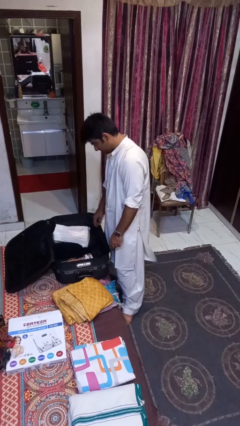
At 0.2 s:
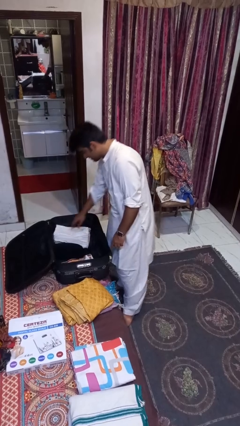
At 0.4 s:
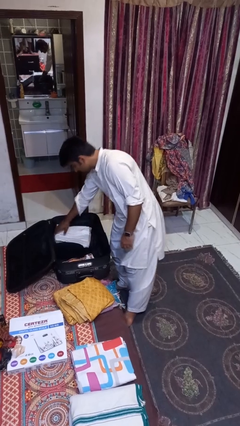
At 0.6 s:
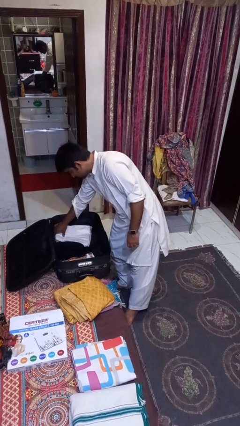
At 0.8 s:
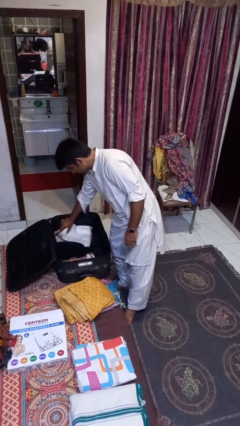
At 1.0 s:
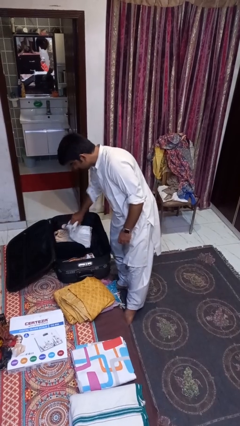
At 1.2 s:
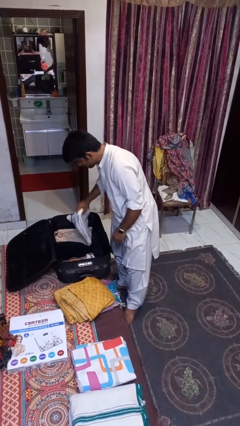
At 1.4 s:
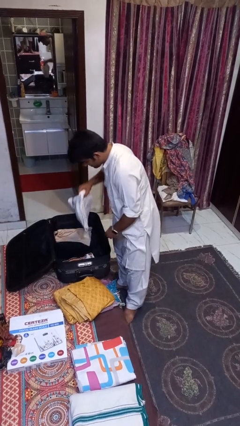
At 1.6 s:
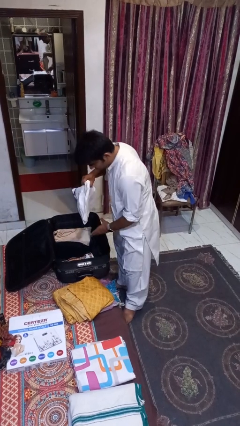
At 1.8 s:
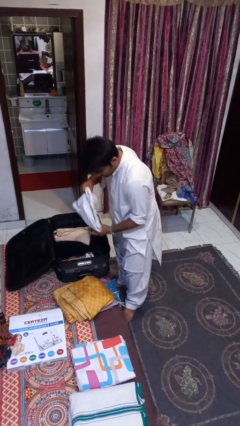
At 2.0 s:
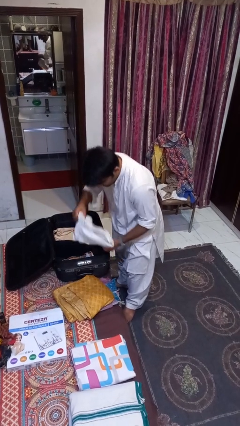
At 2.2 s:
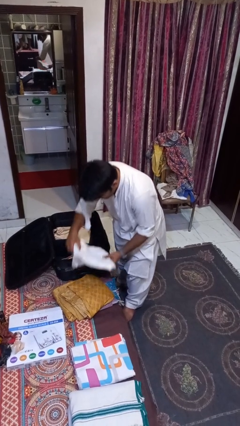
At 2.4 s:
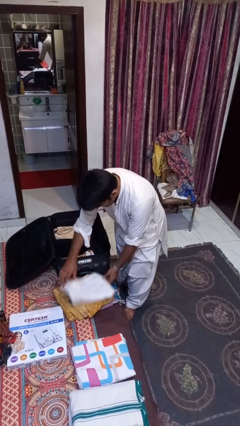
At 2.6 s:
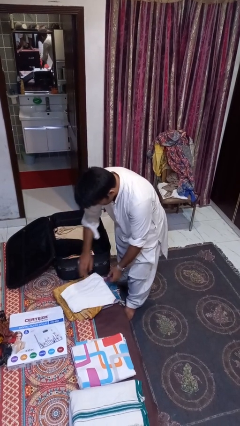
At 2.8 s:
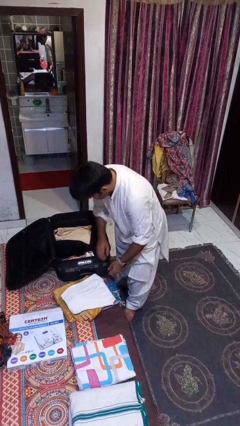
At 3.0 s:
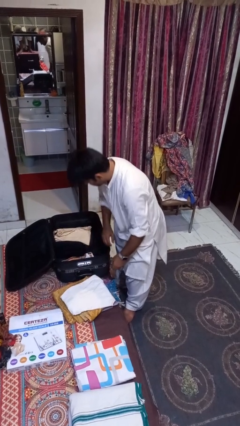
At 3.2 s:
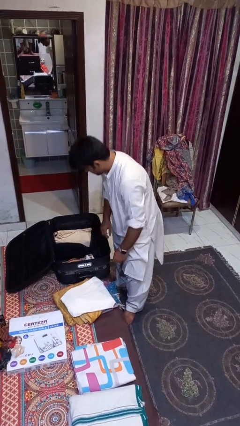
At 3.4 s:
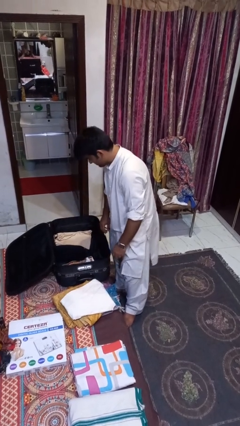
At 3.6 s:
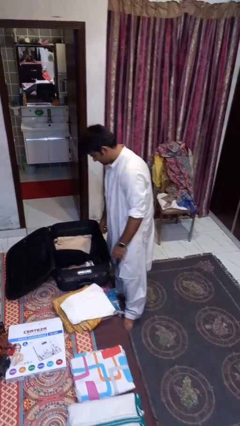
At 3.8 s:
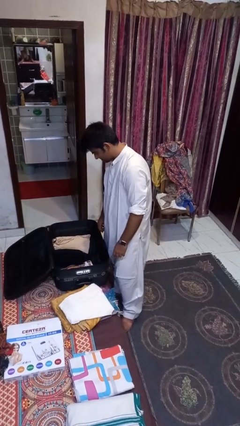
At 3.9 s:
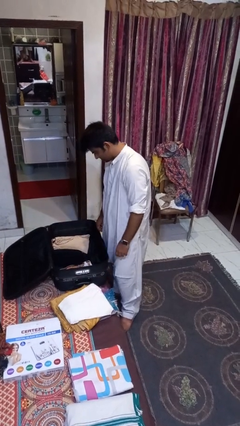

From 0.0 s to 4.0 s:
person unloads clothes from suitcase

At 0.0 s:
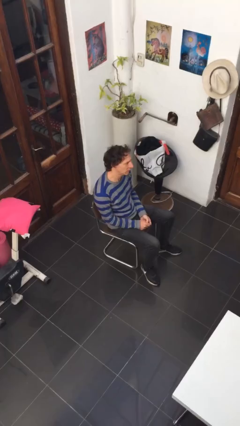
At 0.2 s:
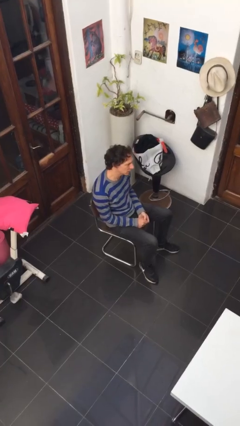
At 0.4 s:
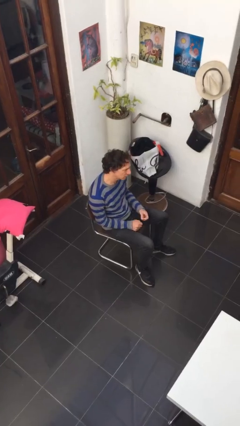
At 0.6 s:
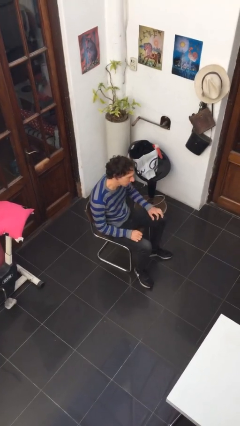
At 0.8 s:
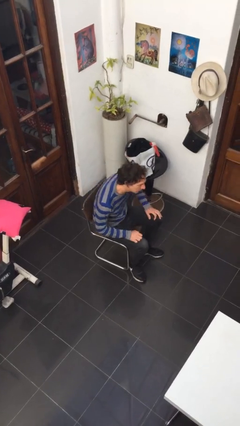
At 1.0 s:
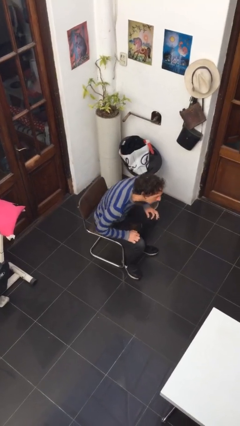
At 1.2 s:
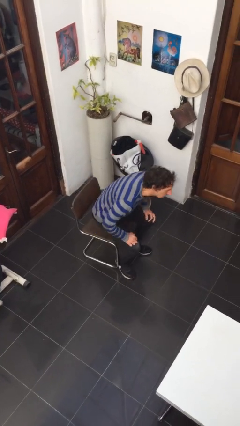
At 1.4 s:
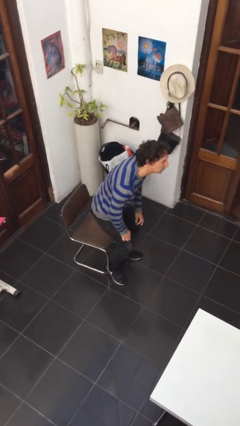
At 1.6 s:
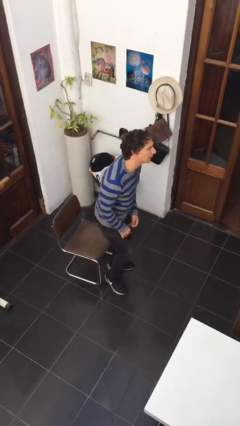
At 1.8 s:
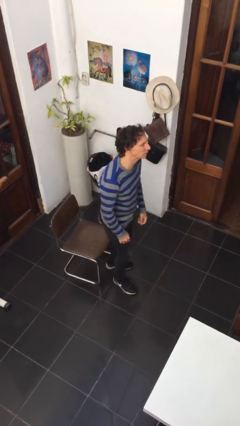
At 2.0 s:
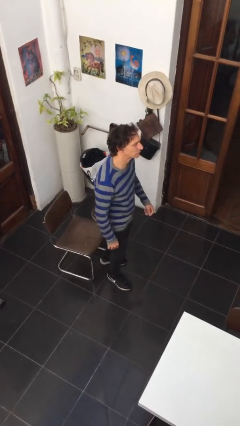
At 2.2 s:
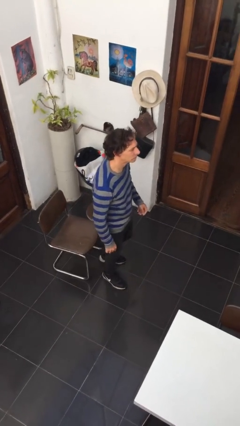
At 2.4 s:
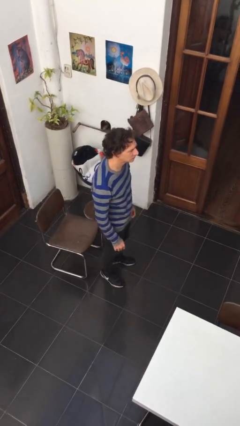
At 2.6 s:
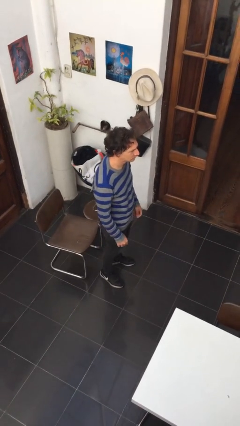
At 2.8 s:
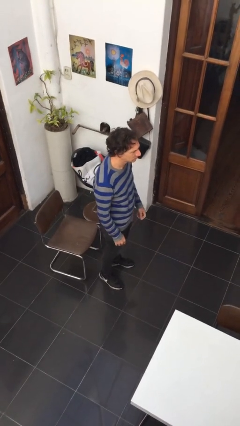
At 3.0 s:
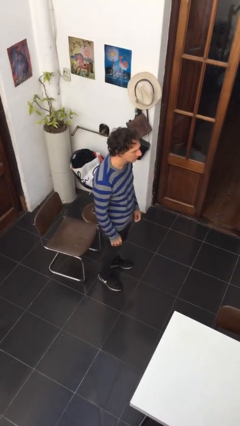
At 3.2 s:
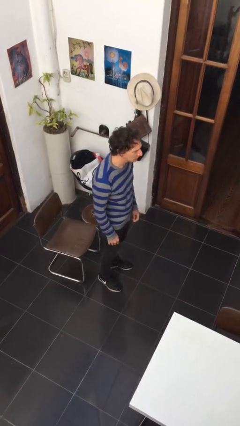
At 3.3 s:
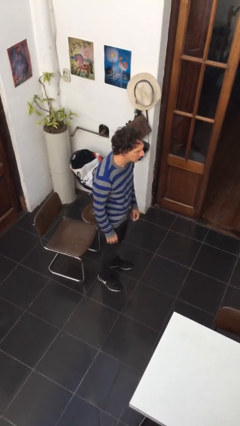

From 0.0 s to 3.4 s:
person stands up

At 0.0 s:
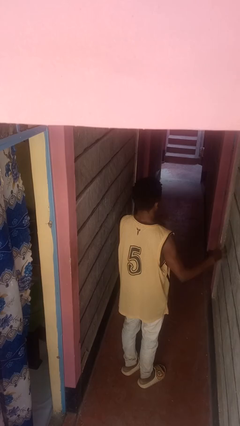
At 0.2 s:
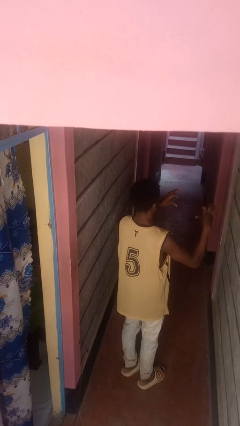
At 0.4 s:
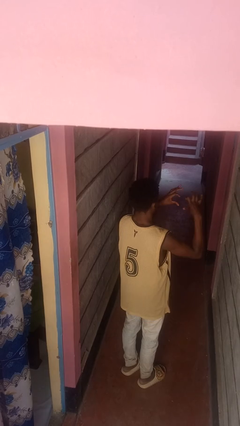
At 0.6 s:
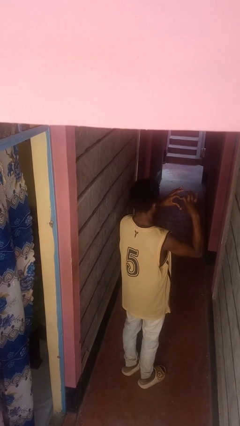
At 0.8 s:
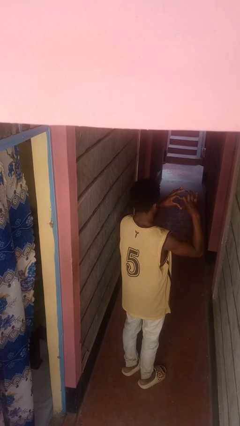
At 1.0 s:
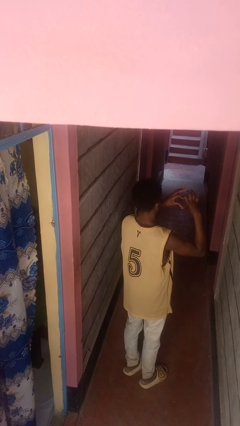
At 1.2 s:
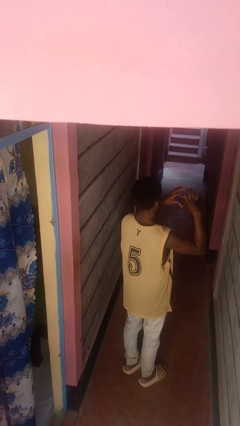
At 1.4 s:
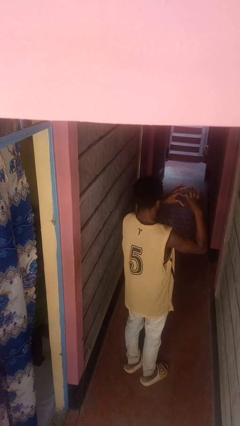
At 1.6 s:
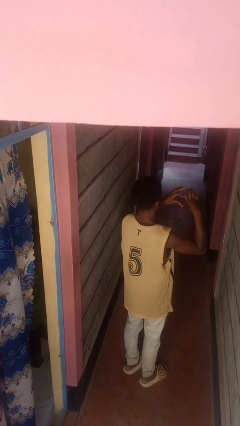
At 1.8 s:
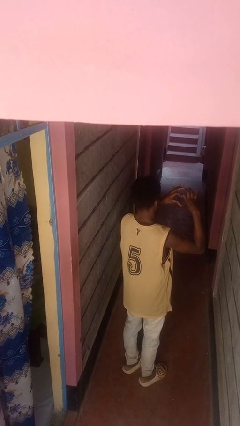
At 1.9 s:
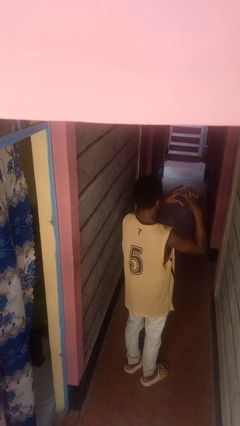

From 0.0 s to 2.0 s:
person gestures heart

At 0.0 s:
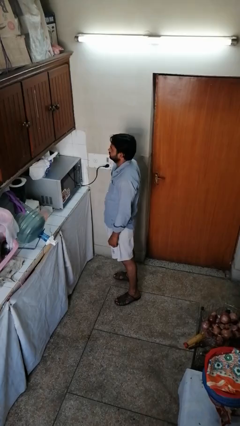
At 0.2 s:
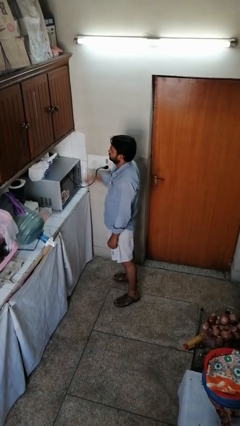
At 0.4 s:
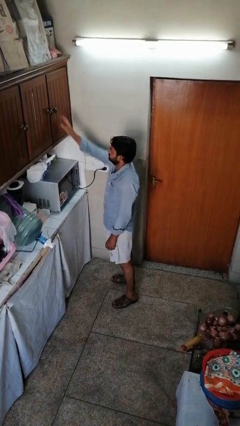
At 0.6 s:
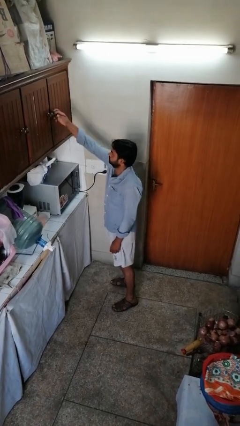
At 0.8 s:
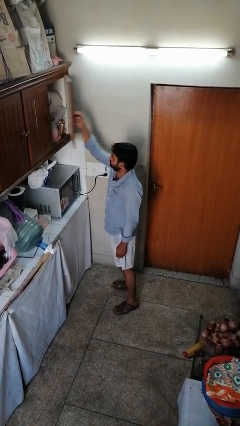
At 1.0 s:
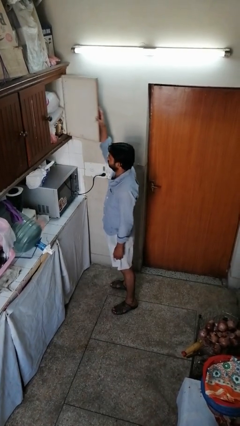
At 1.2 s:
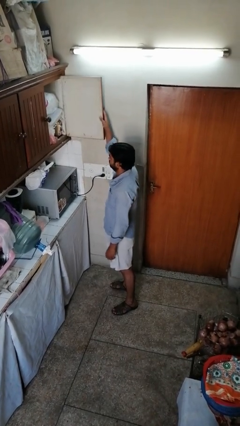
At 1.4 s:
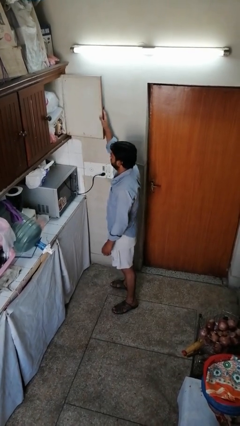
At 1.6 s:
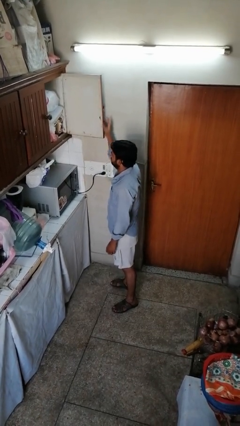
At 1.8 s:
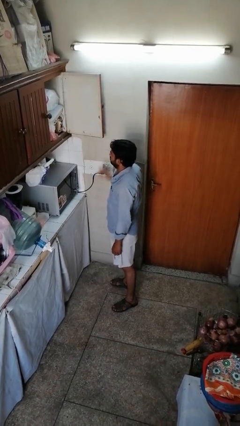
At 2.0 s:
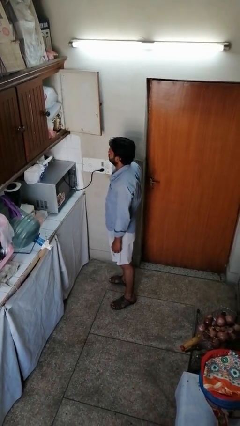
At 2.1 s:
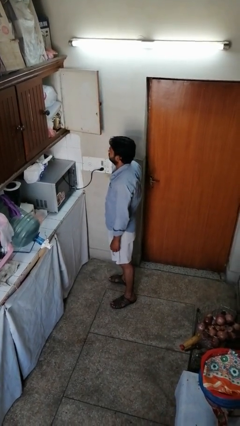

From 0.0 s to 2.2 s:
person opens cabinet

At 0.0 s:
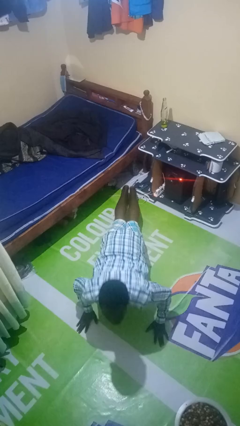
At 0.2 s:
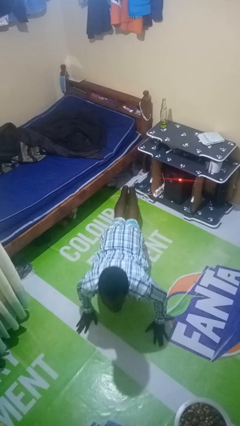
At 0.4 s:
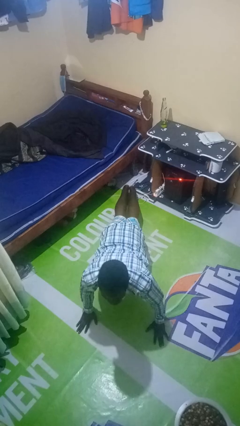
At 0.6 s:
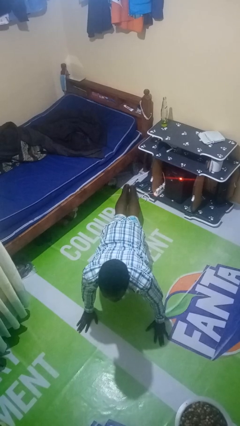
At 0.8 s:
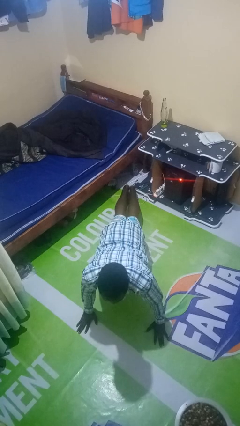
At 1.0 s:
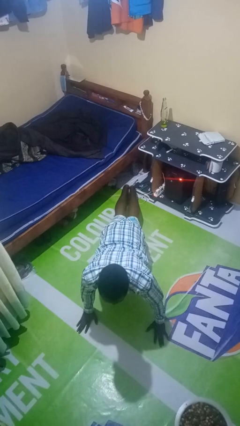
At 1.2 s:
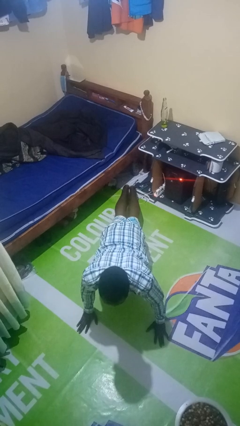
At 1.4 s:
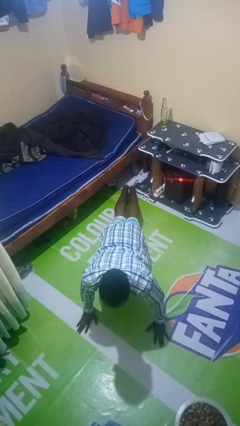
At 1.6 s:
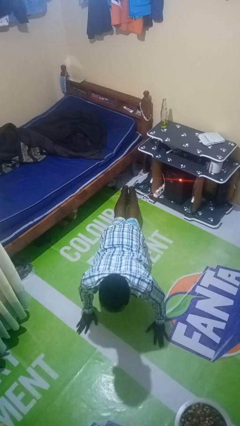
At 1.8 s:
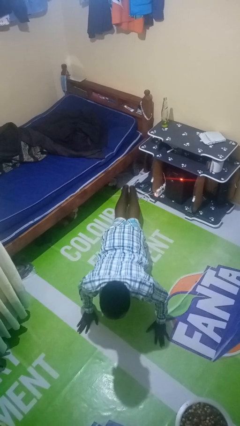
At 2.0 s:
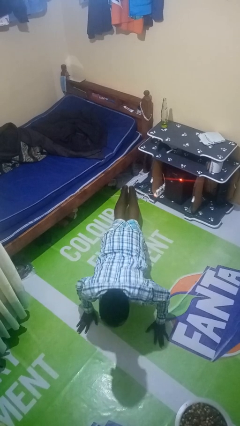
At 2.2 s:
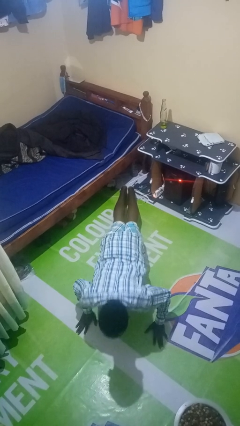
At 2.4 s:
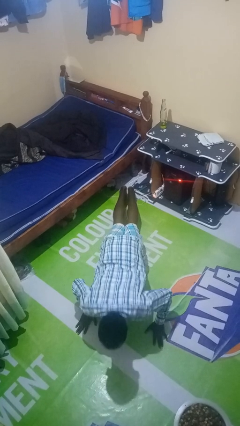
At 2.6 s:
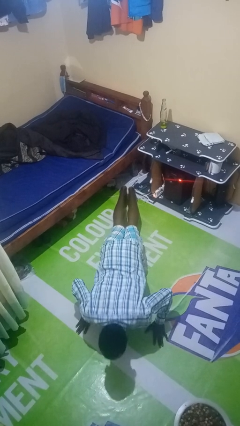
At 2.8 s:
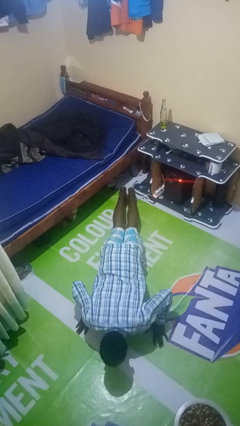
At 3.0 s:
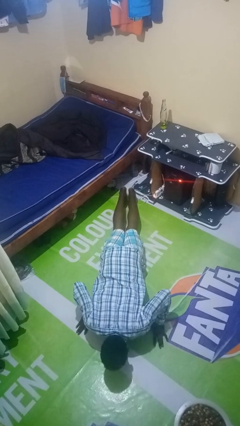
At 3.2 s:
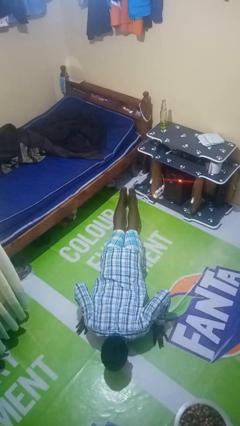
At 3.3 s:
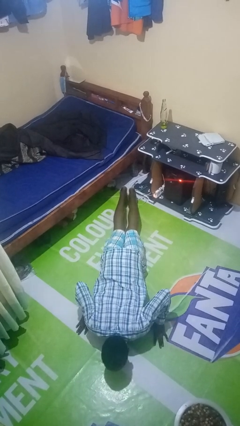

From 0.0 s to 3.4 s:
person exercises with pushup

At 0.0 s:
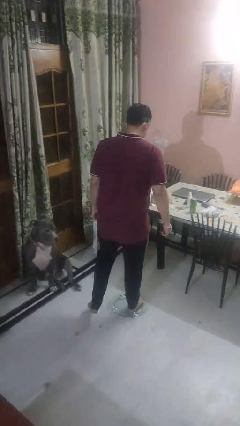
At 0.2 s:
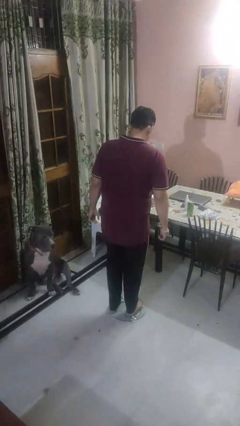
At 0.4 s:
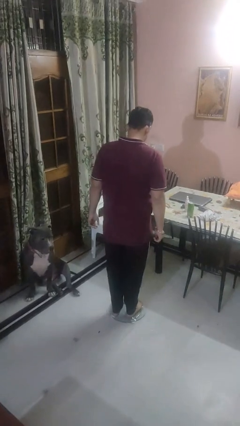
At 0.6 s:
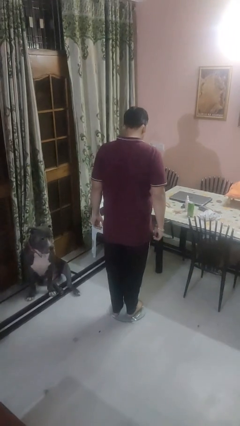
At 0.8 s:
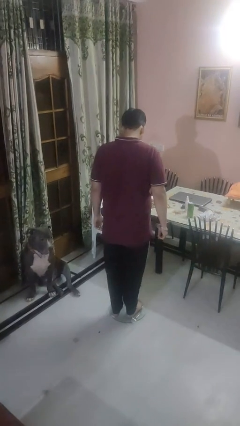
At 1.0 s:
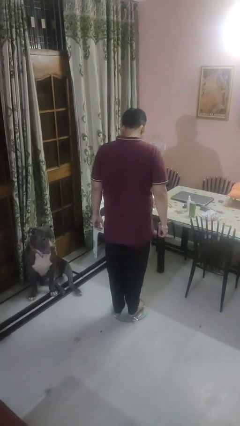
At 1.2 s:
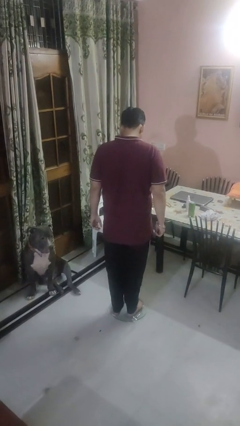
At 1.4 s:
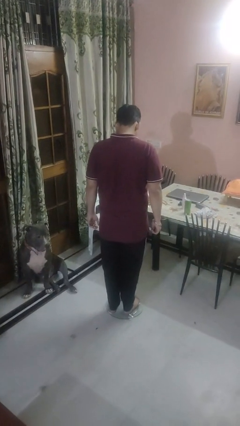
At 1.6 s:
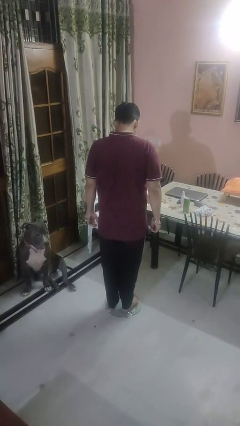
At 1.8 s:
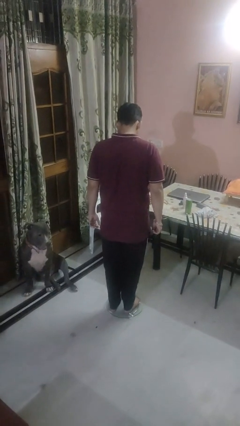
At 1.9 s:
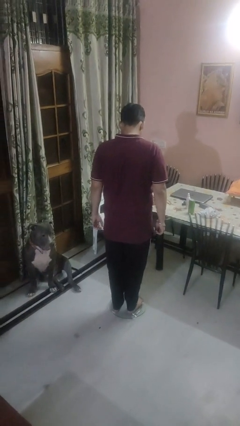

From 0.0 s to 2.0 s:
person uses bodyweight scale

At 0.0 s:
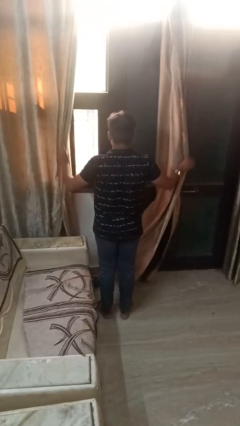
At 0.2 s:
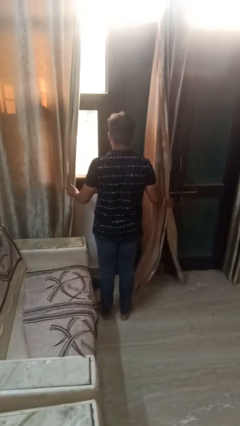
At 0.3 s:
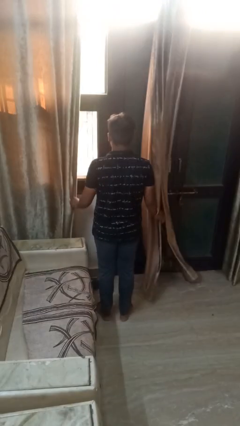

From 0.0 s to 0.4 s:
person opens curtains
